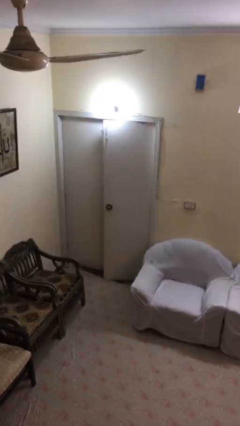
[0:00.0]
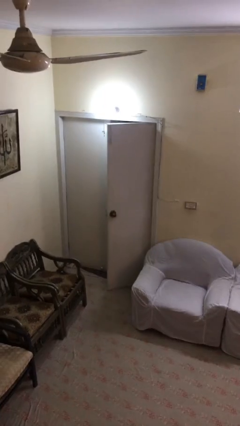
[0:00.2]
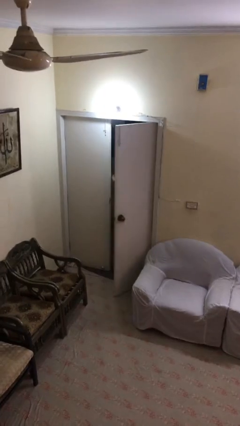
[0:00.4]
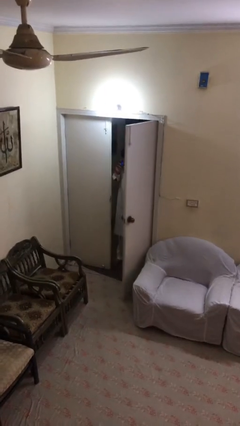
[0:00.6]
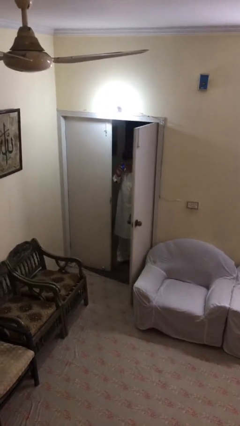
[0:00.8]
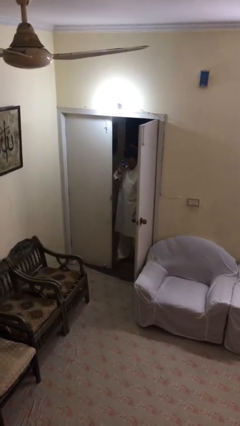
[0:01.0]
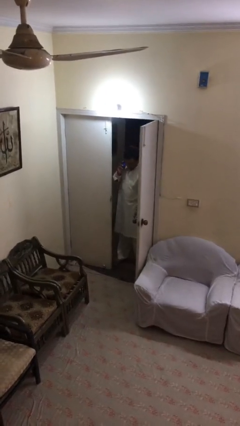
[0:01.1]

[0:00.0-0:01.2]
person opens facility door

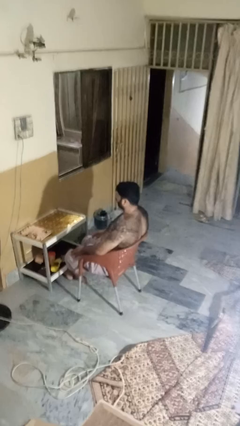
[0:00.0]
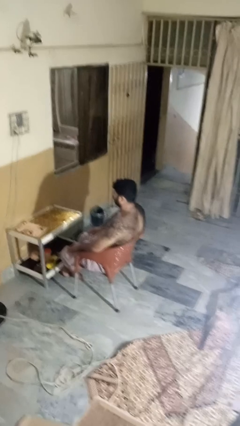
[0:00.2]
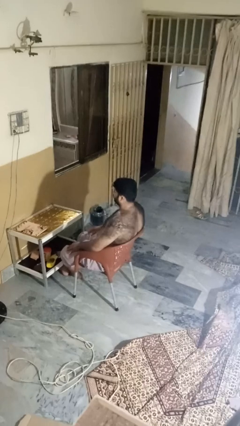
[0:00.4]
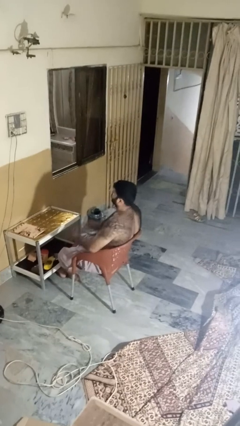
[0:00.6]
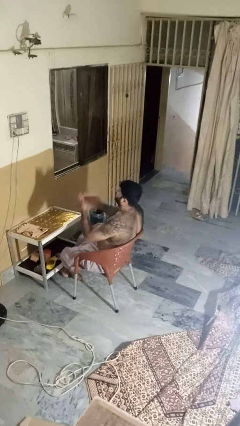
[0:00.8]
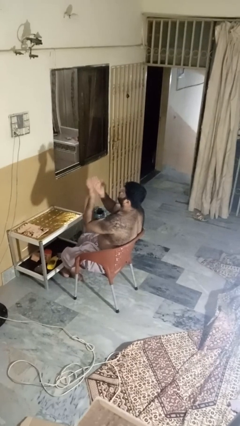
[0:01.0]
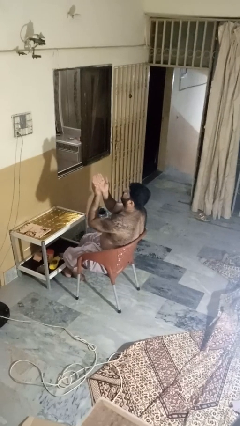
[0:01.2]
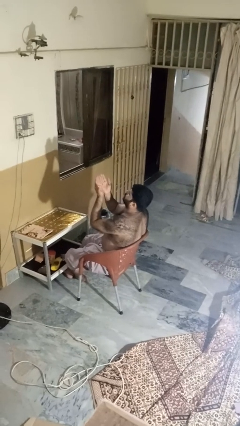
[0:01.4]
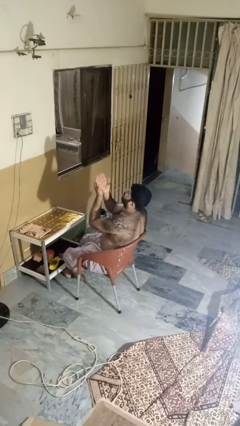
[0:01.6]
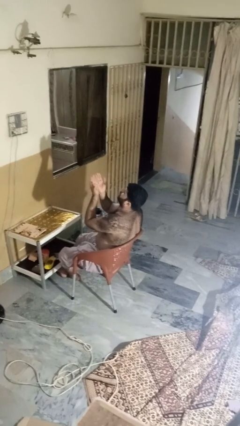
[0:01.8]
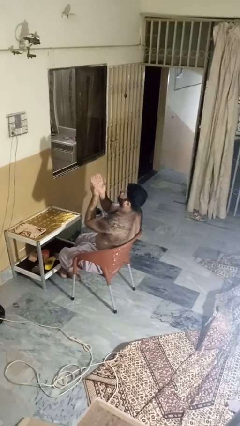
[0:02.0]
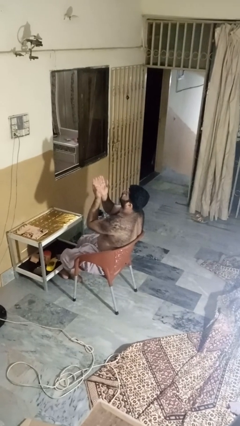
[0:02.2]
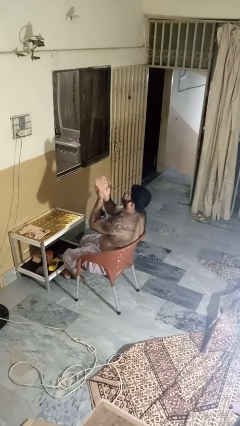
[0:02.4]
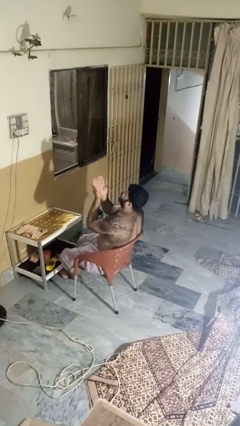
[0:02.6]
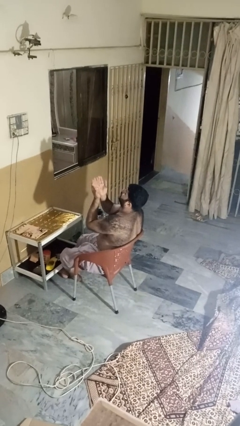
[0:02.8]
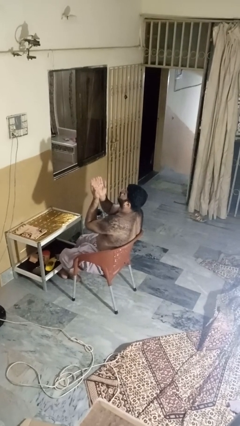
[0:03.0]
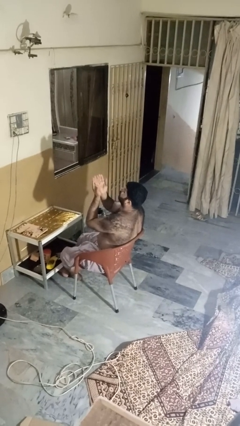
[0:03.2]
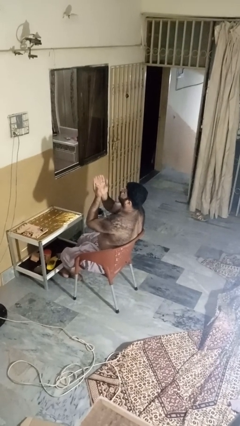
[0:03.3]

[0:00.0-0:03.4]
person prays

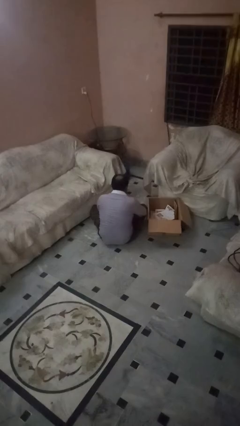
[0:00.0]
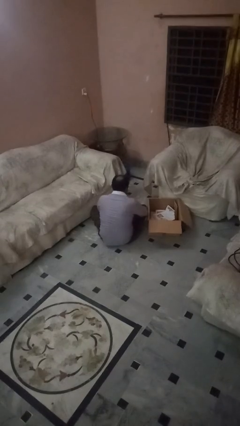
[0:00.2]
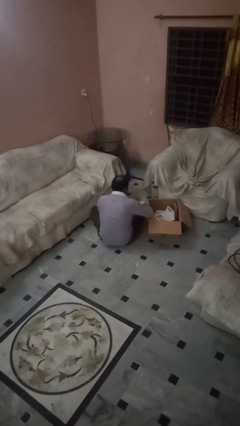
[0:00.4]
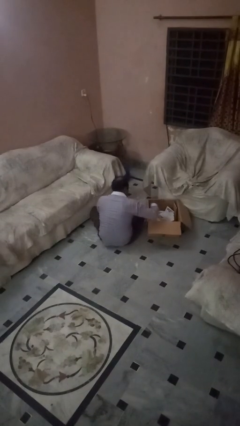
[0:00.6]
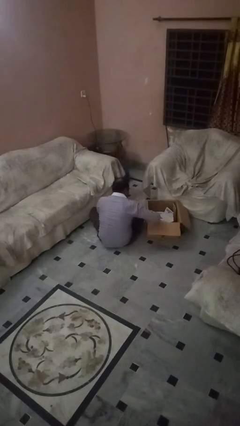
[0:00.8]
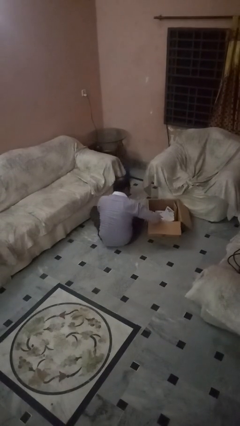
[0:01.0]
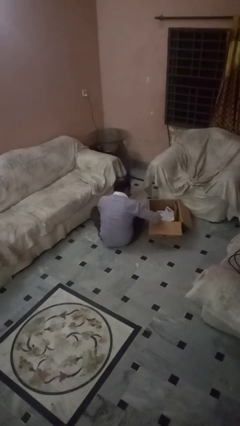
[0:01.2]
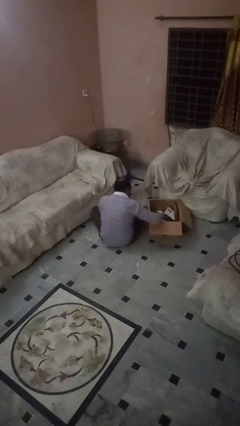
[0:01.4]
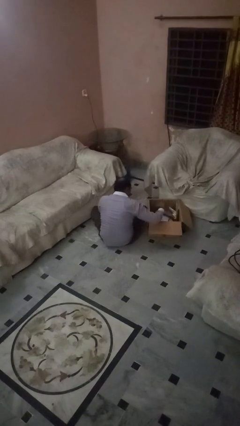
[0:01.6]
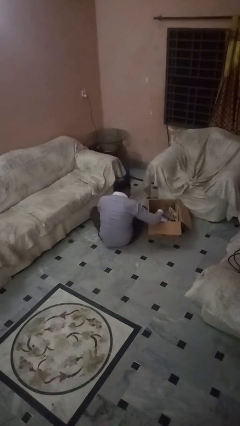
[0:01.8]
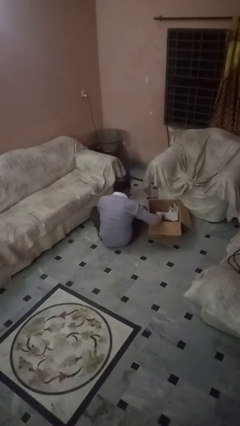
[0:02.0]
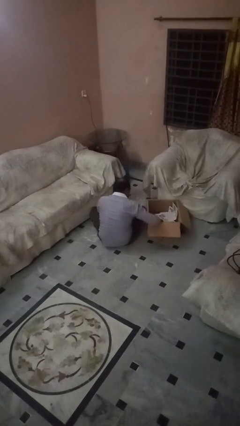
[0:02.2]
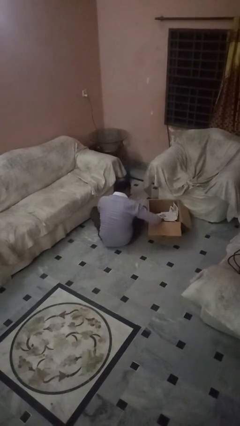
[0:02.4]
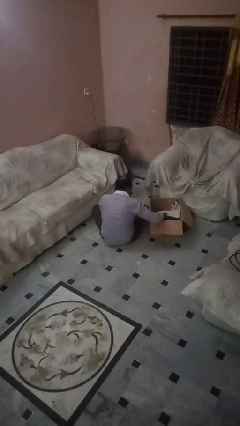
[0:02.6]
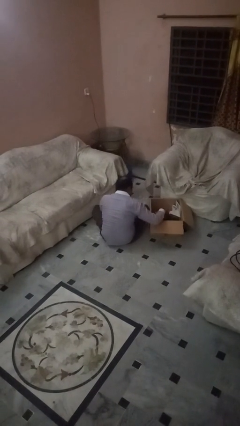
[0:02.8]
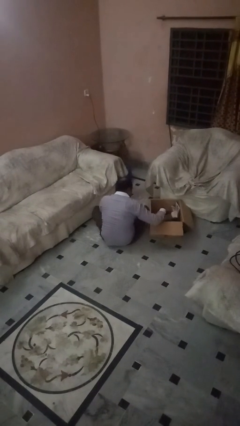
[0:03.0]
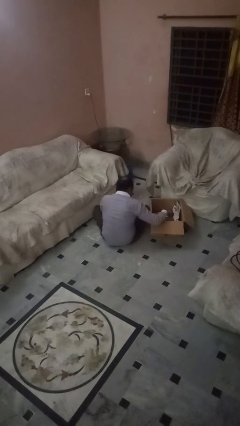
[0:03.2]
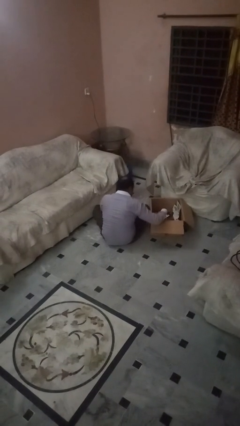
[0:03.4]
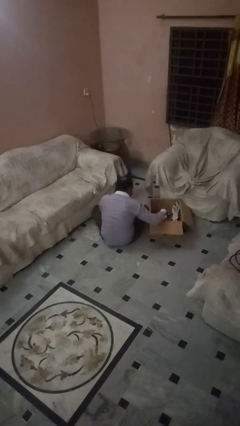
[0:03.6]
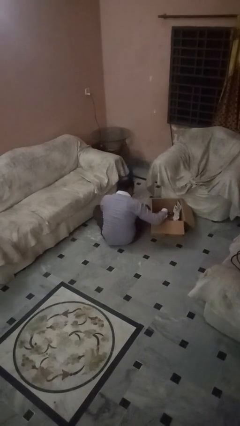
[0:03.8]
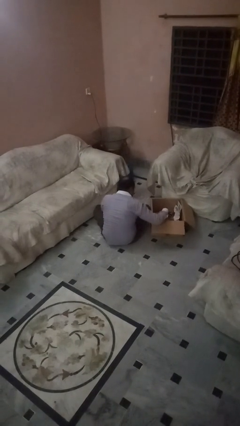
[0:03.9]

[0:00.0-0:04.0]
person searches in box

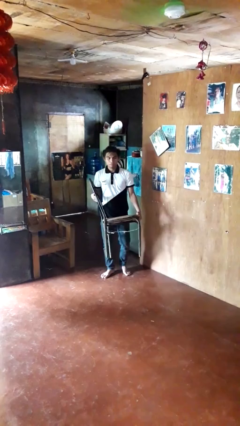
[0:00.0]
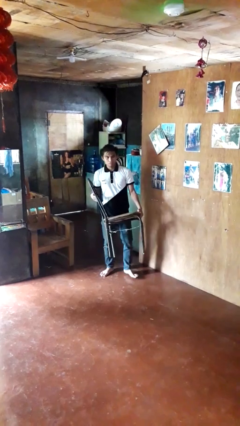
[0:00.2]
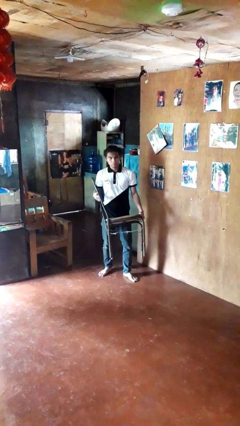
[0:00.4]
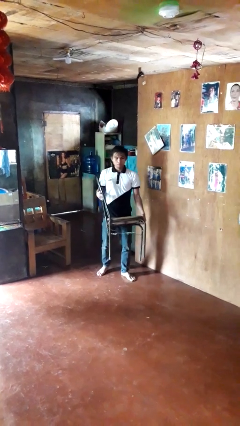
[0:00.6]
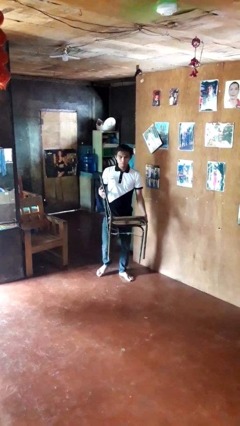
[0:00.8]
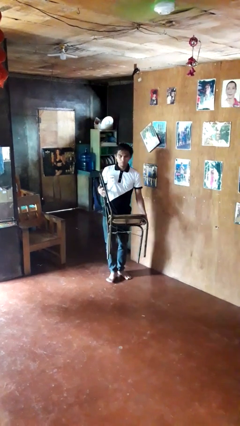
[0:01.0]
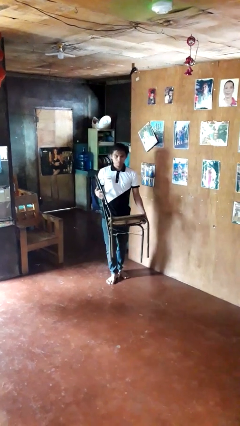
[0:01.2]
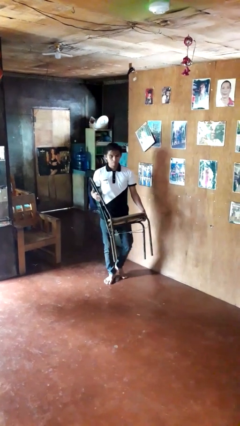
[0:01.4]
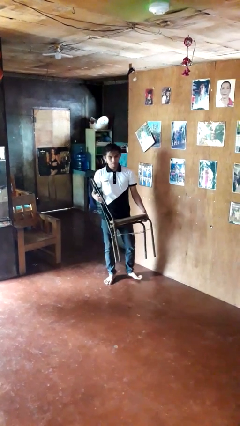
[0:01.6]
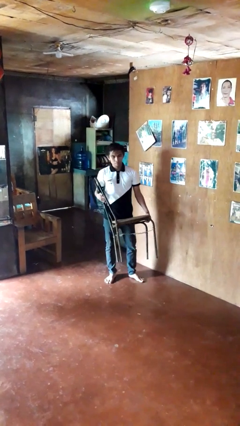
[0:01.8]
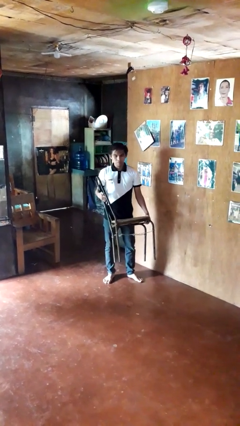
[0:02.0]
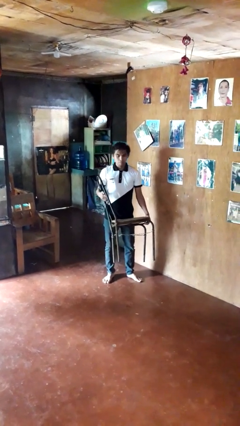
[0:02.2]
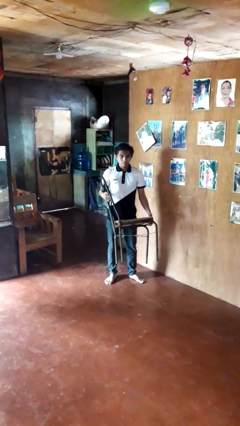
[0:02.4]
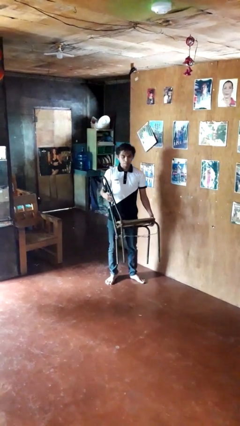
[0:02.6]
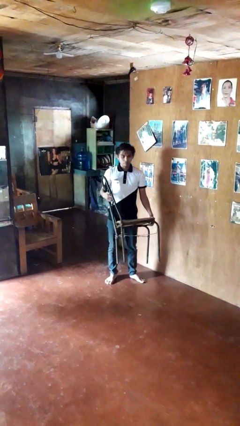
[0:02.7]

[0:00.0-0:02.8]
person carries furniture

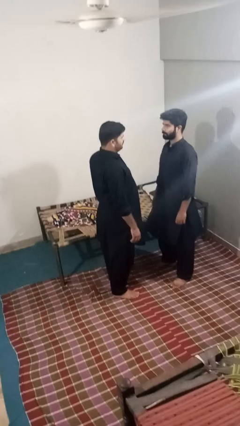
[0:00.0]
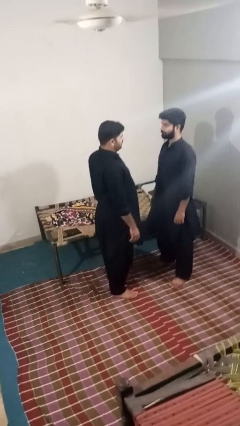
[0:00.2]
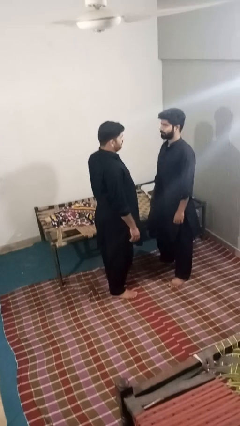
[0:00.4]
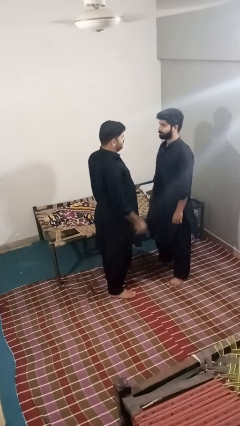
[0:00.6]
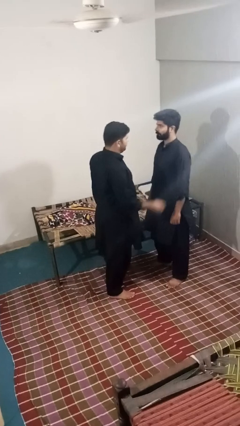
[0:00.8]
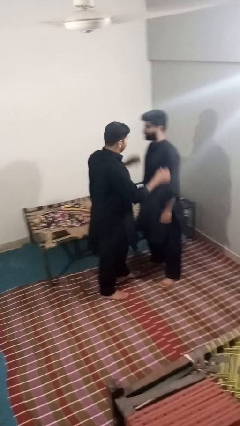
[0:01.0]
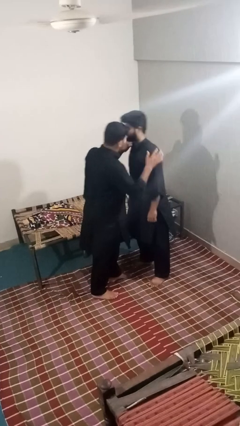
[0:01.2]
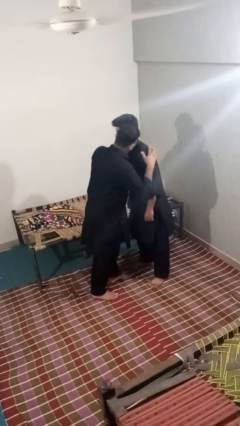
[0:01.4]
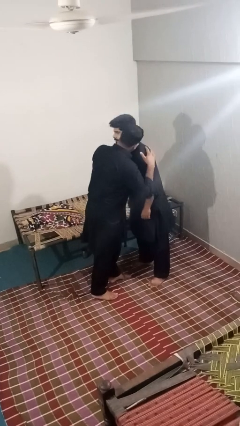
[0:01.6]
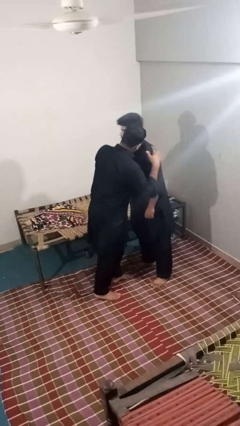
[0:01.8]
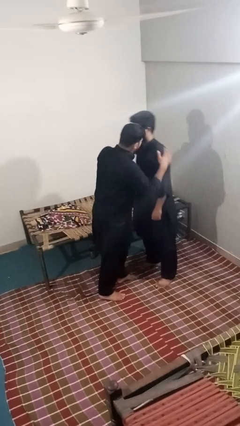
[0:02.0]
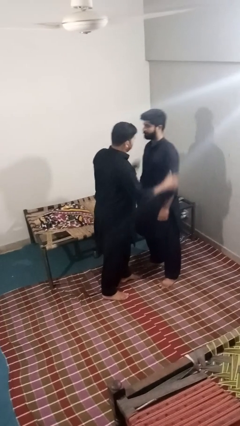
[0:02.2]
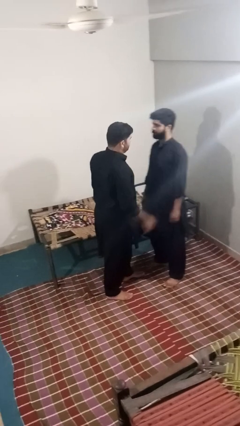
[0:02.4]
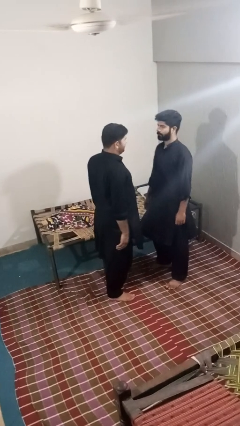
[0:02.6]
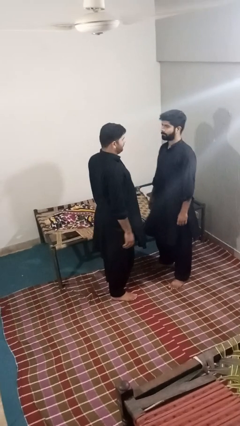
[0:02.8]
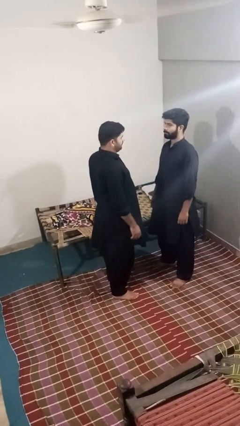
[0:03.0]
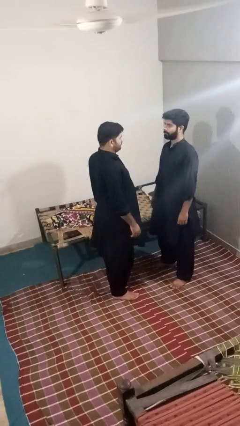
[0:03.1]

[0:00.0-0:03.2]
person kisses cheek of person

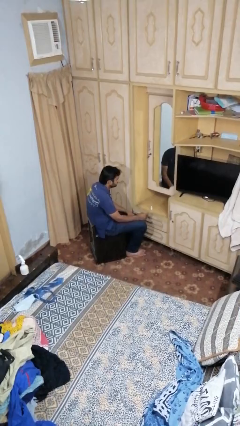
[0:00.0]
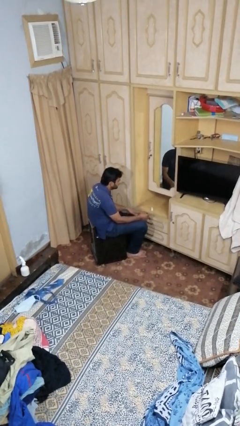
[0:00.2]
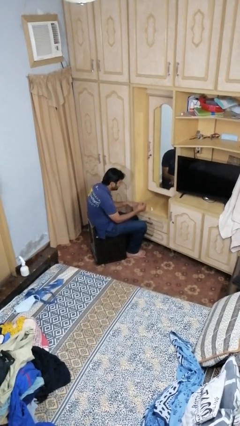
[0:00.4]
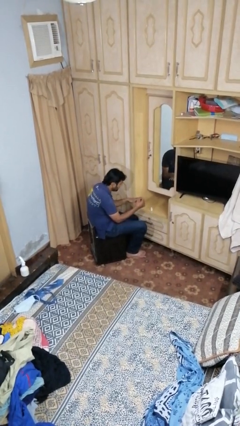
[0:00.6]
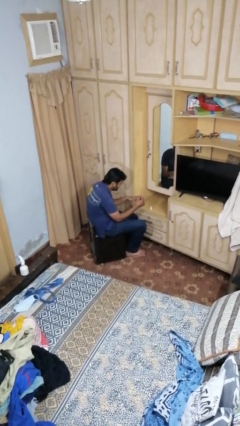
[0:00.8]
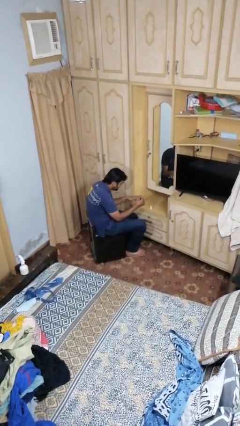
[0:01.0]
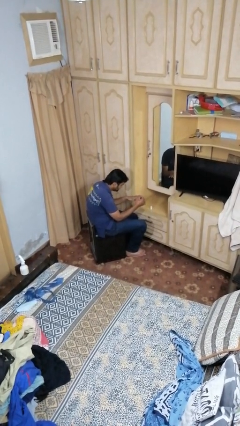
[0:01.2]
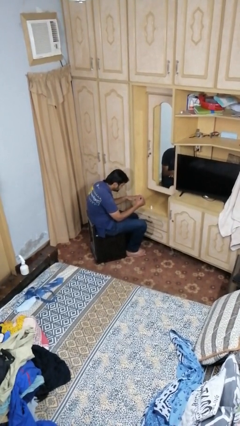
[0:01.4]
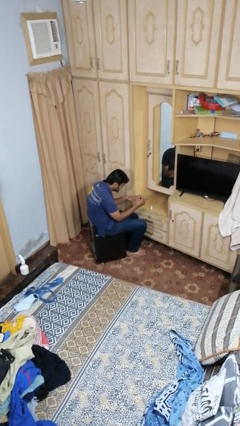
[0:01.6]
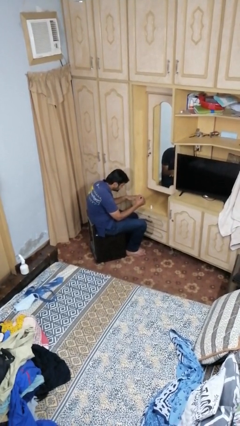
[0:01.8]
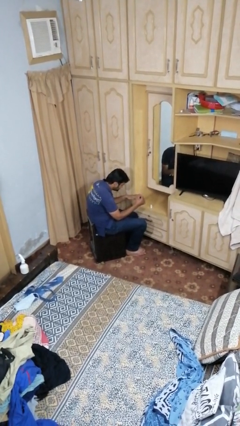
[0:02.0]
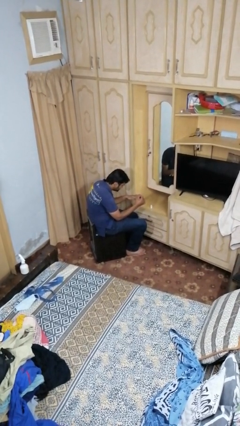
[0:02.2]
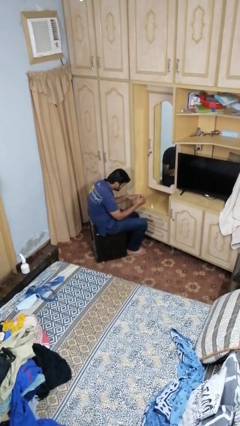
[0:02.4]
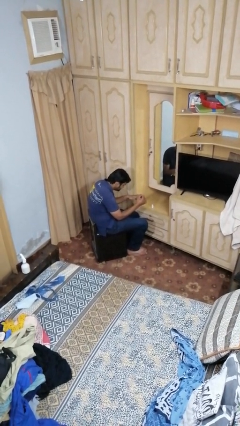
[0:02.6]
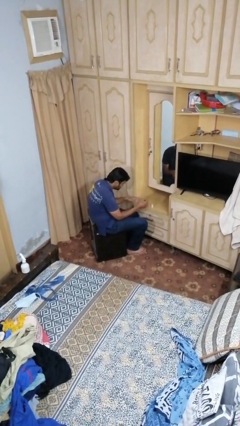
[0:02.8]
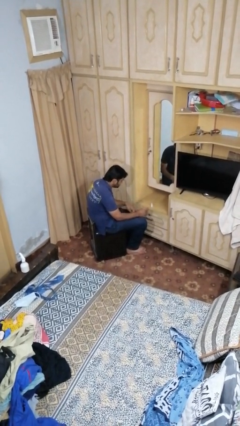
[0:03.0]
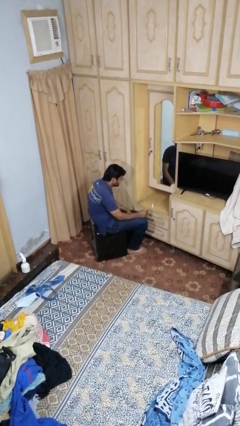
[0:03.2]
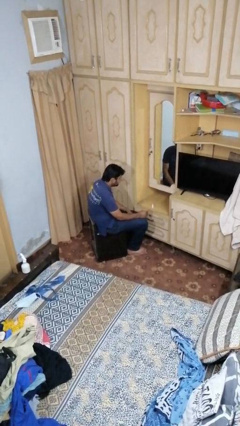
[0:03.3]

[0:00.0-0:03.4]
person paints fingernails
